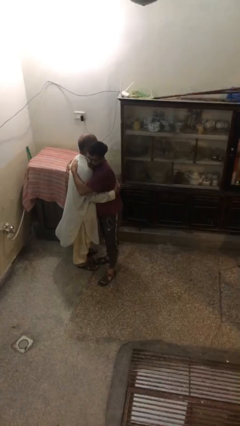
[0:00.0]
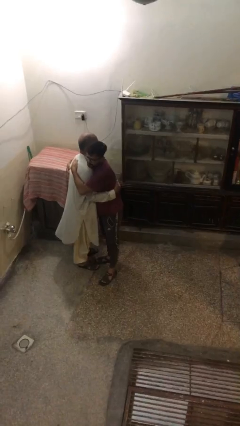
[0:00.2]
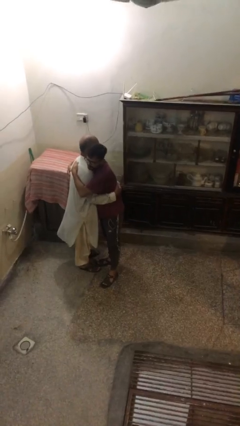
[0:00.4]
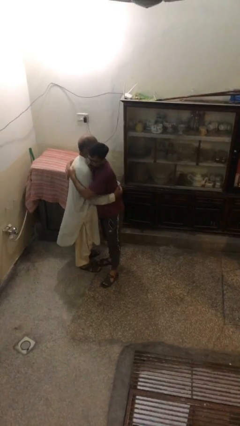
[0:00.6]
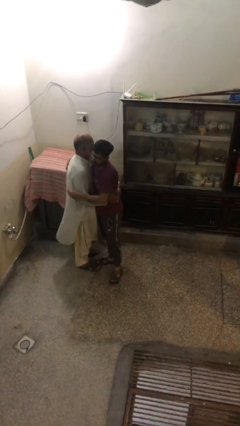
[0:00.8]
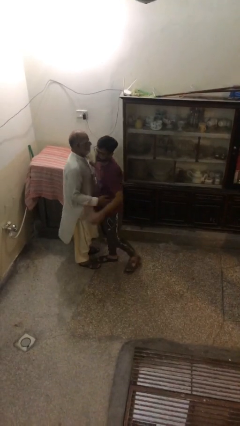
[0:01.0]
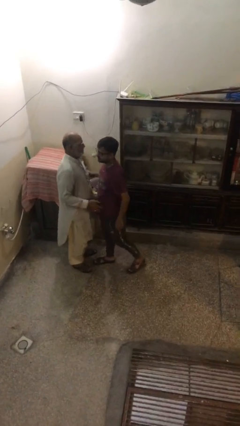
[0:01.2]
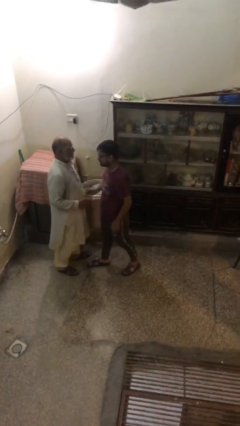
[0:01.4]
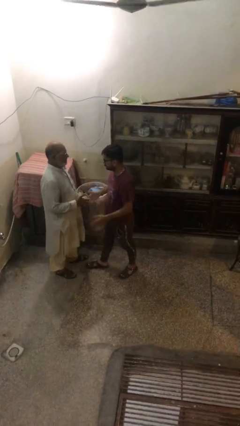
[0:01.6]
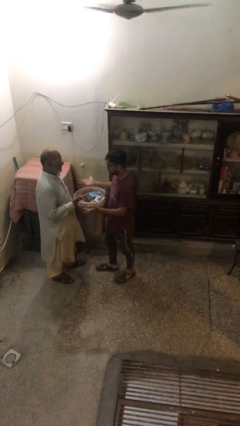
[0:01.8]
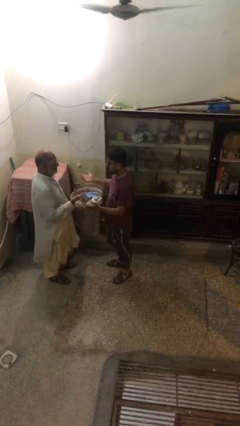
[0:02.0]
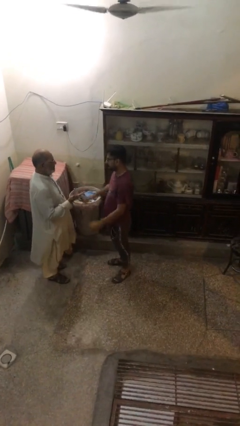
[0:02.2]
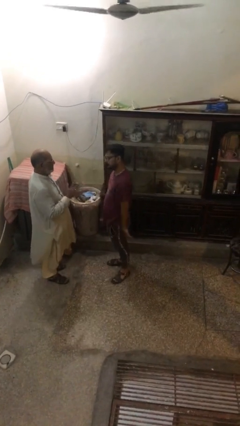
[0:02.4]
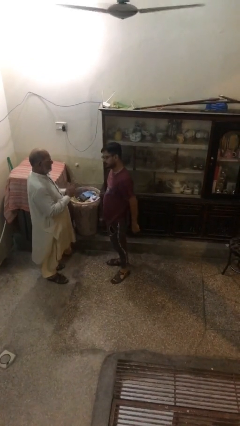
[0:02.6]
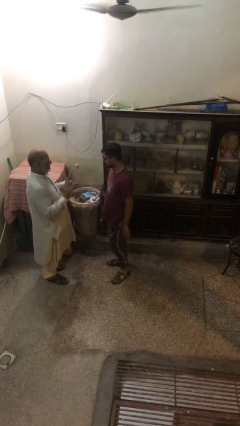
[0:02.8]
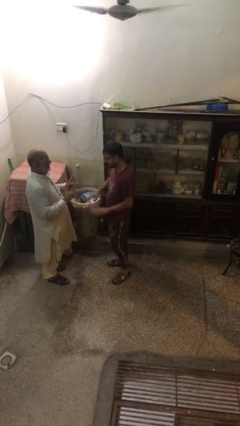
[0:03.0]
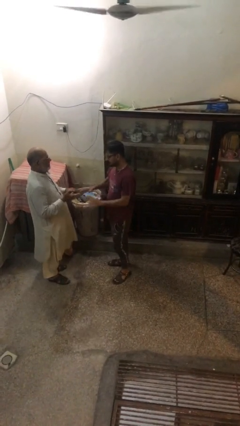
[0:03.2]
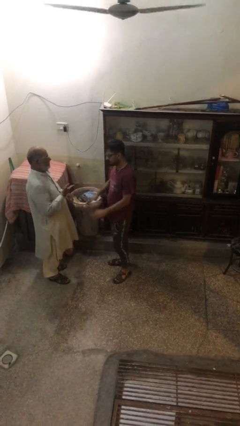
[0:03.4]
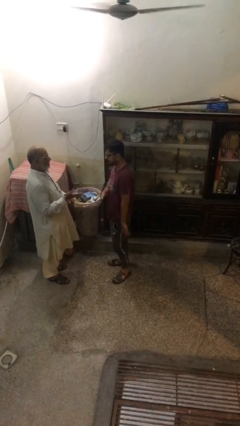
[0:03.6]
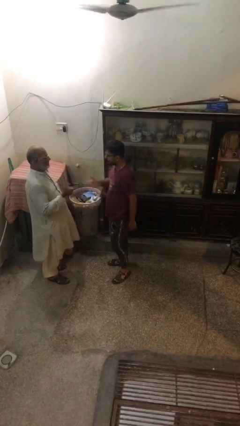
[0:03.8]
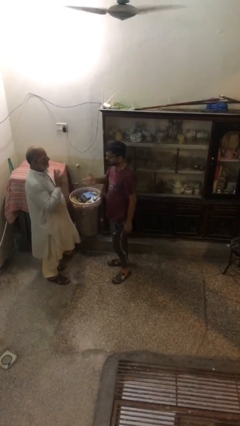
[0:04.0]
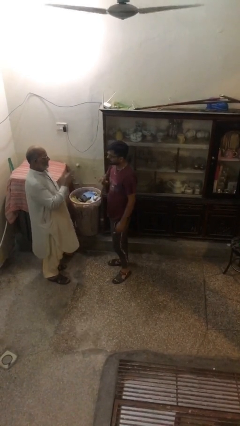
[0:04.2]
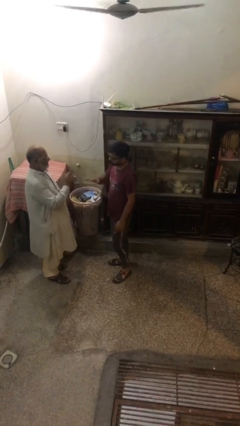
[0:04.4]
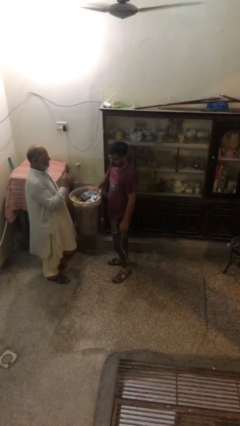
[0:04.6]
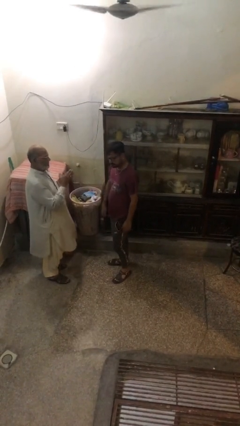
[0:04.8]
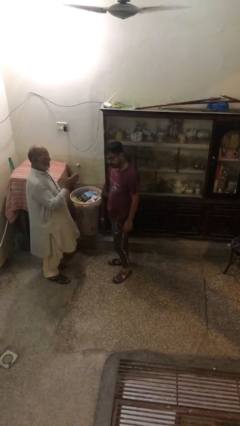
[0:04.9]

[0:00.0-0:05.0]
person talks to person

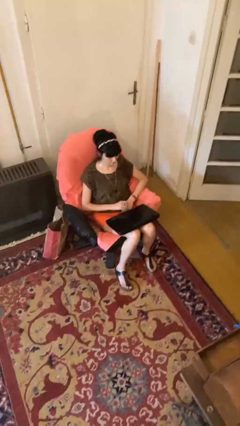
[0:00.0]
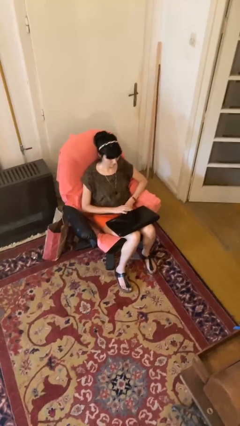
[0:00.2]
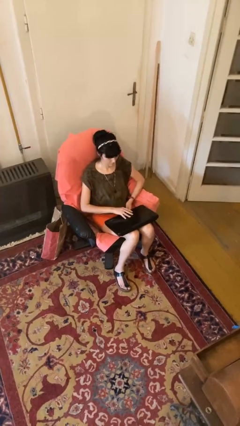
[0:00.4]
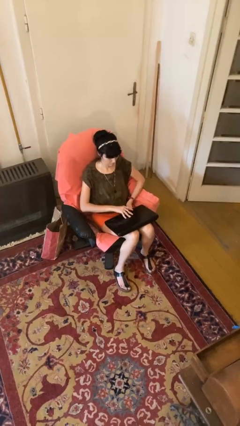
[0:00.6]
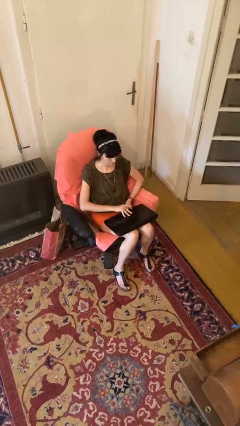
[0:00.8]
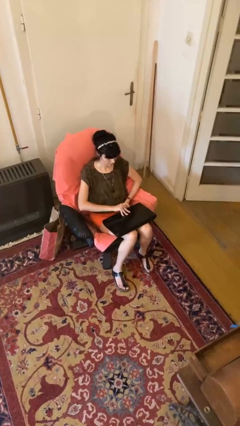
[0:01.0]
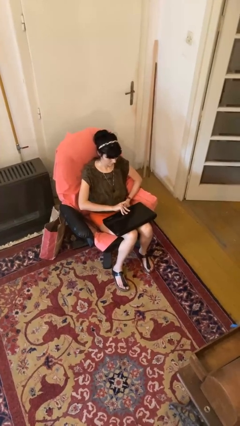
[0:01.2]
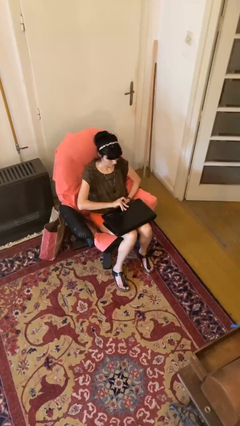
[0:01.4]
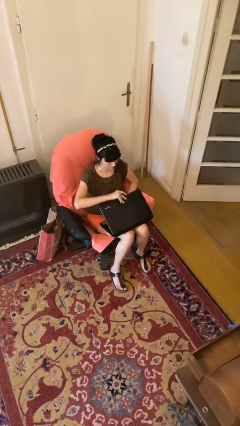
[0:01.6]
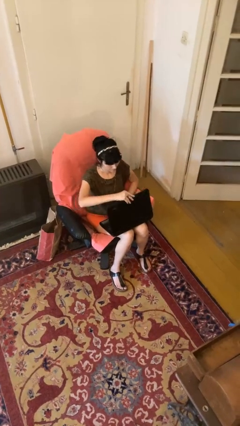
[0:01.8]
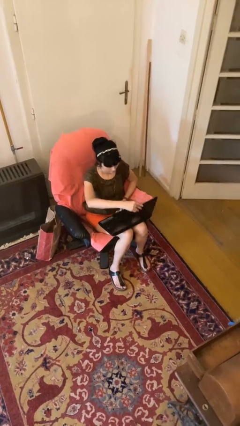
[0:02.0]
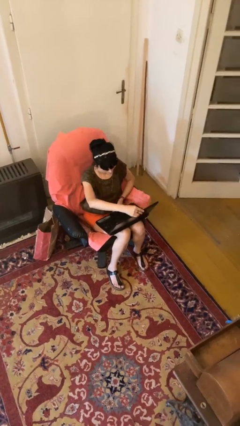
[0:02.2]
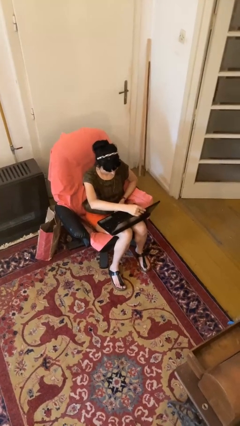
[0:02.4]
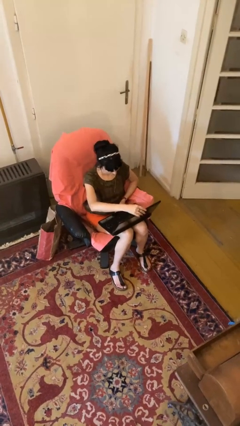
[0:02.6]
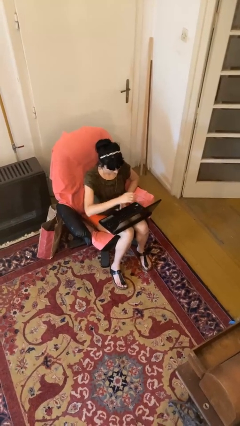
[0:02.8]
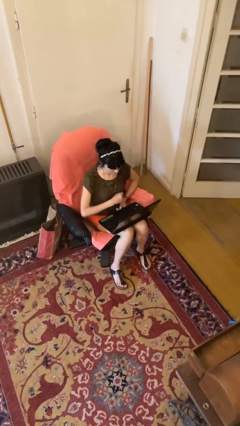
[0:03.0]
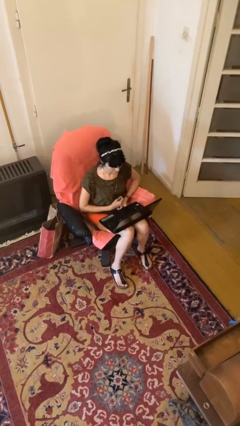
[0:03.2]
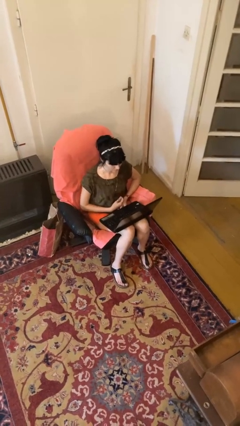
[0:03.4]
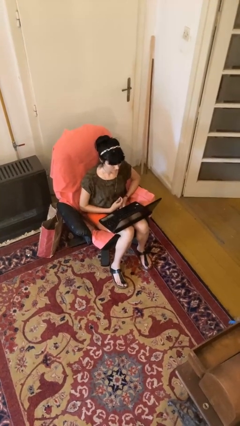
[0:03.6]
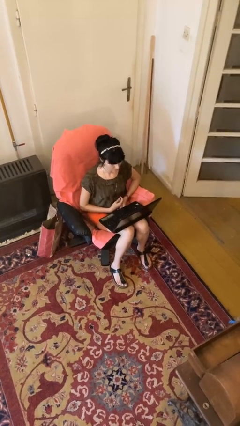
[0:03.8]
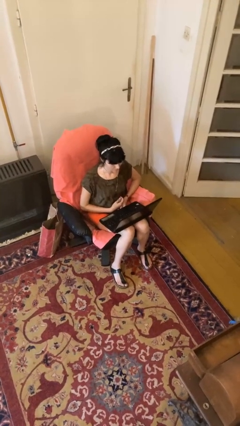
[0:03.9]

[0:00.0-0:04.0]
person opens laptop

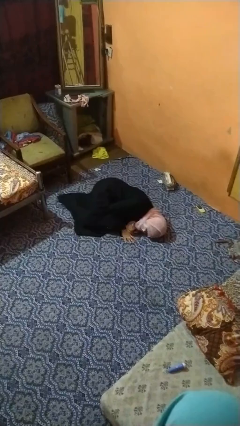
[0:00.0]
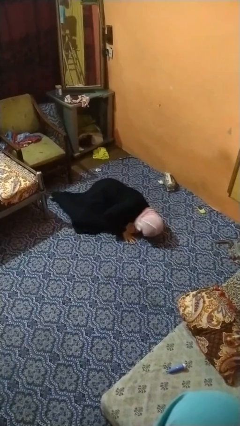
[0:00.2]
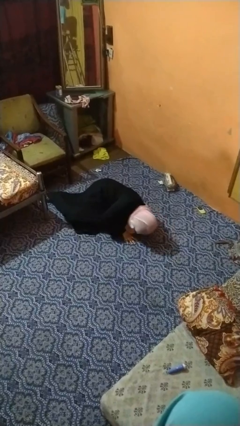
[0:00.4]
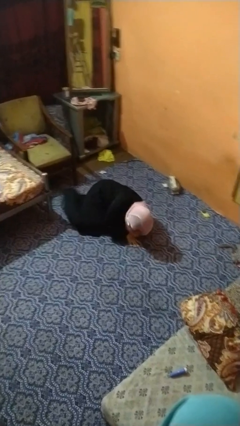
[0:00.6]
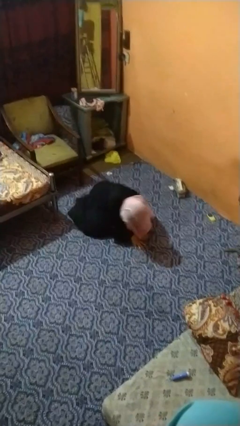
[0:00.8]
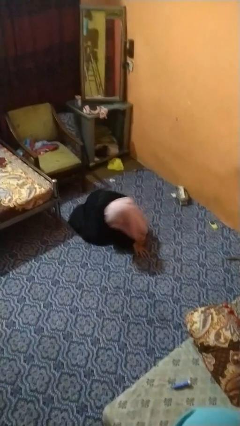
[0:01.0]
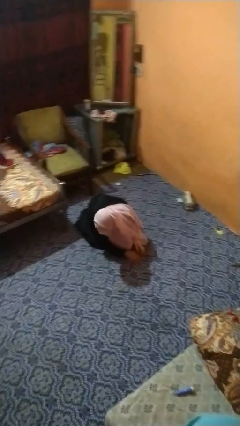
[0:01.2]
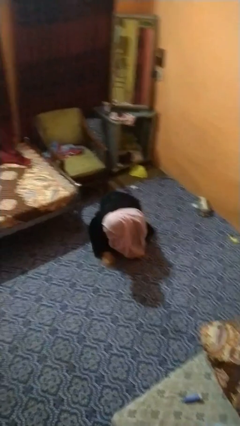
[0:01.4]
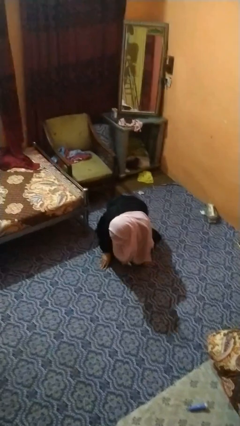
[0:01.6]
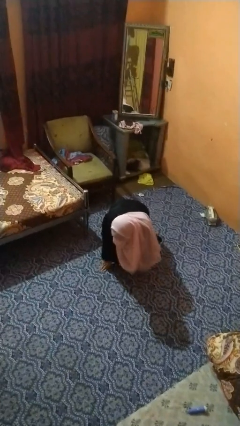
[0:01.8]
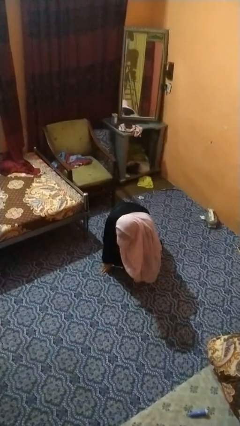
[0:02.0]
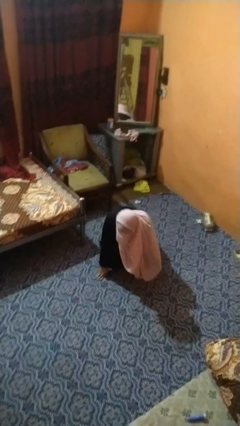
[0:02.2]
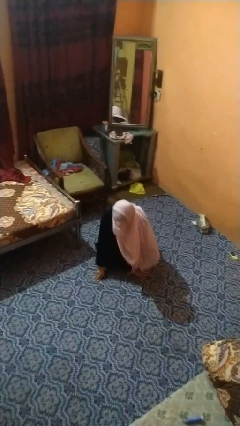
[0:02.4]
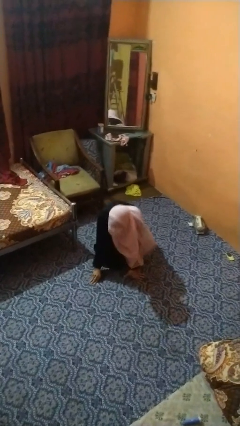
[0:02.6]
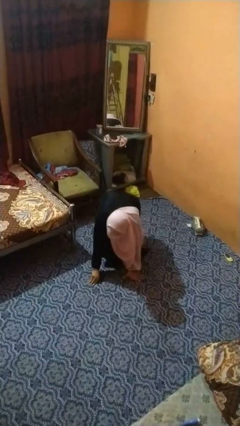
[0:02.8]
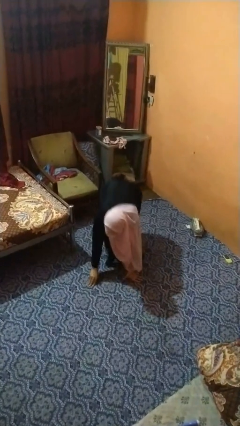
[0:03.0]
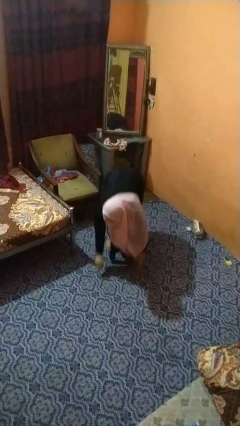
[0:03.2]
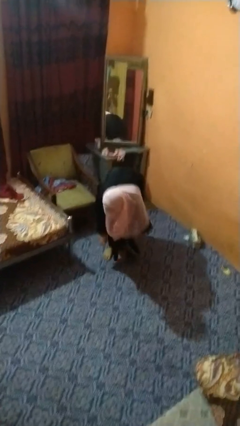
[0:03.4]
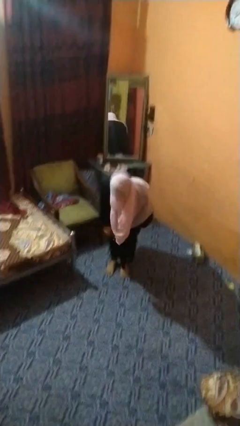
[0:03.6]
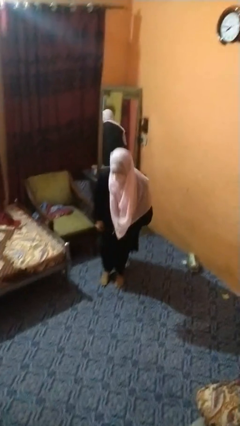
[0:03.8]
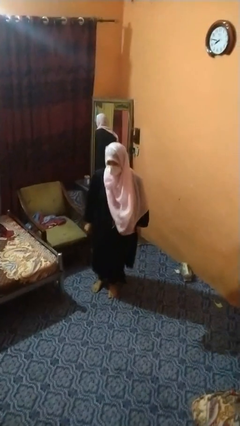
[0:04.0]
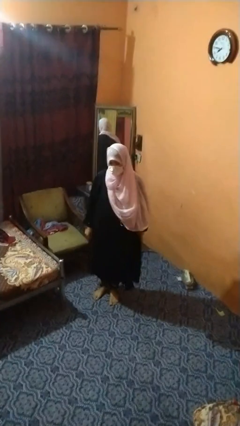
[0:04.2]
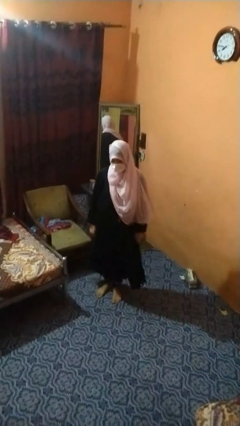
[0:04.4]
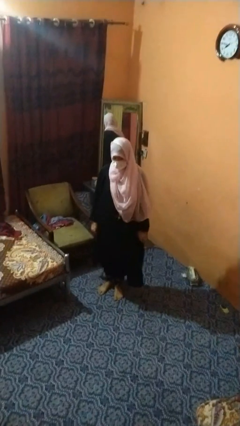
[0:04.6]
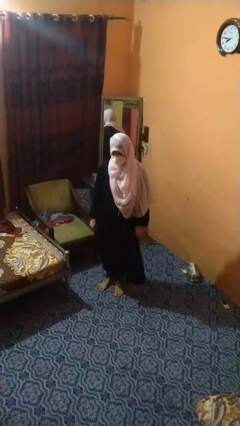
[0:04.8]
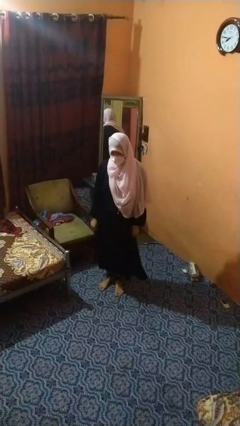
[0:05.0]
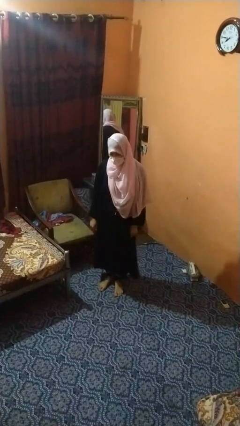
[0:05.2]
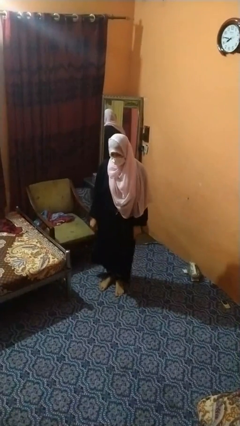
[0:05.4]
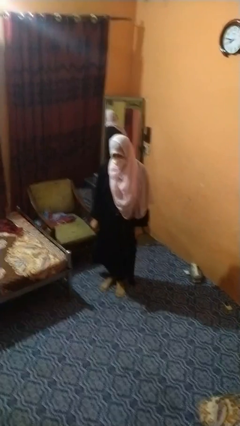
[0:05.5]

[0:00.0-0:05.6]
person stands up from floor

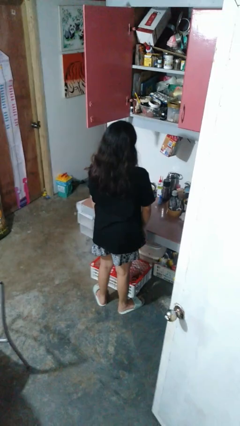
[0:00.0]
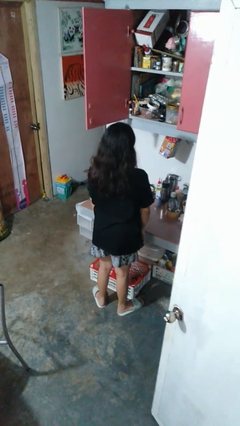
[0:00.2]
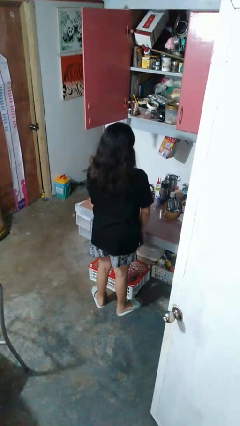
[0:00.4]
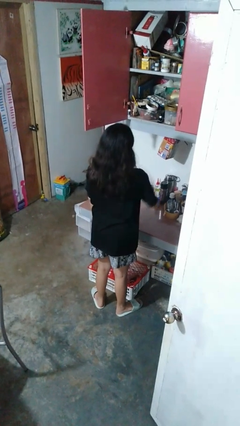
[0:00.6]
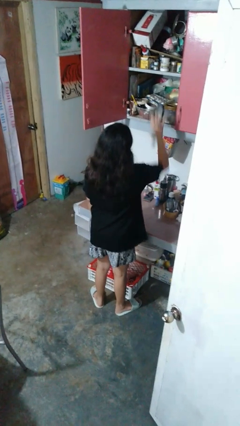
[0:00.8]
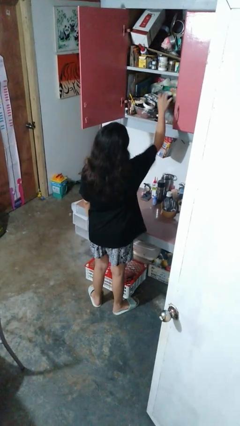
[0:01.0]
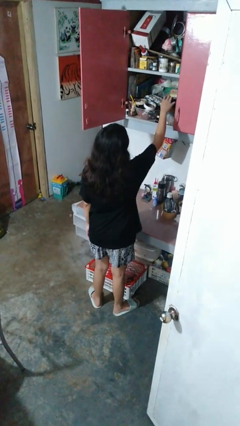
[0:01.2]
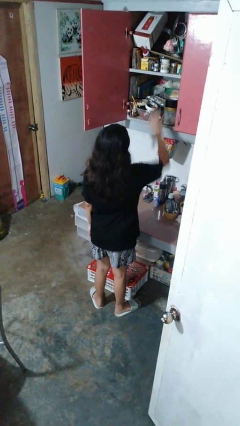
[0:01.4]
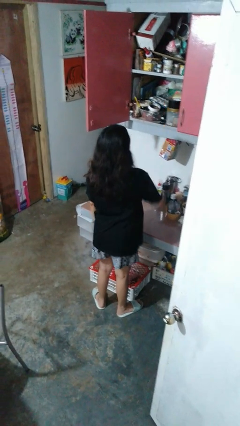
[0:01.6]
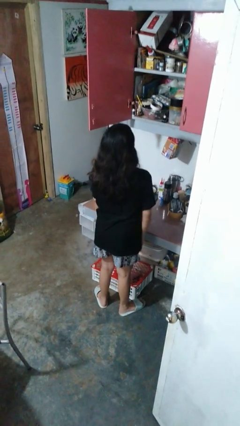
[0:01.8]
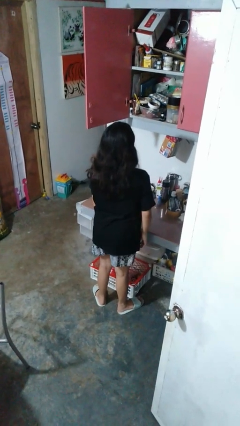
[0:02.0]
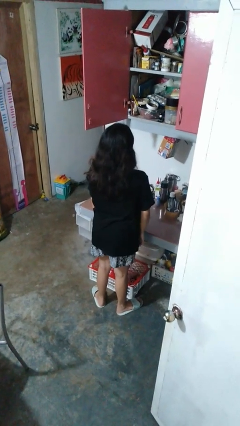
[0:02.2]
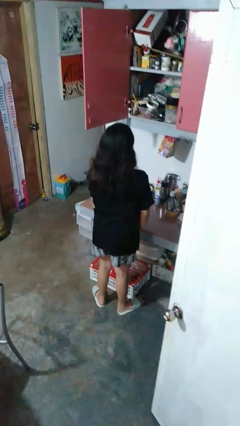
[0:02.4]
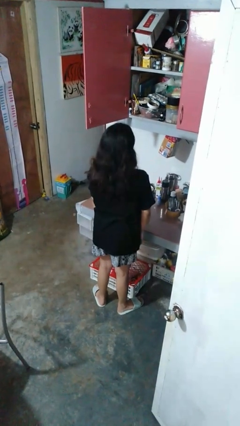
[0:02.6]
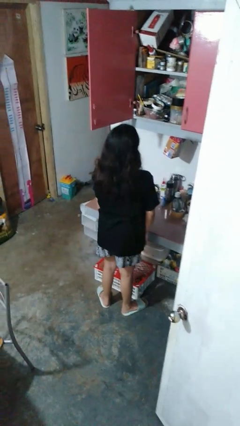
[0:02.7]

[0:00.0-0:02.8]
person puts object in cabinet

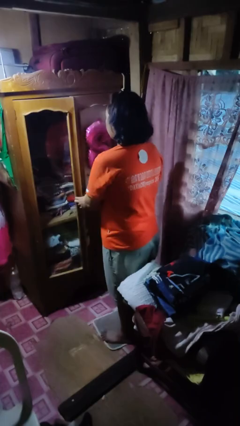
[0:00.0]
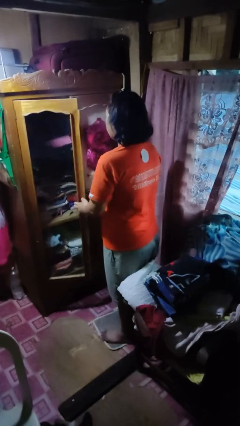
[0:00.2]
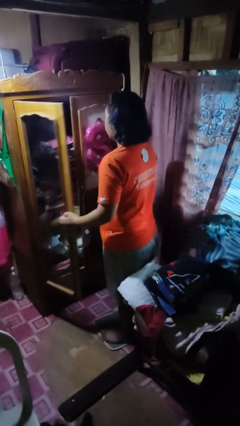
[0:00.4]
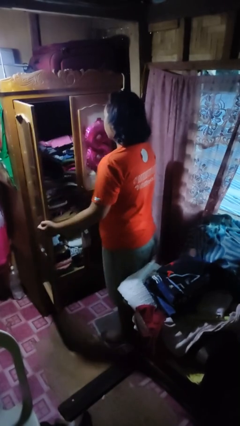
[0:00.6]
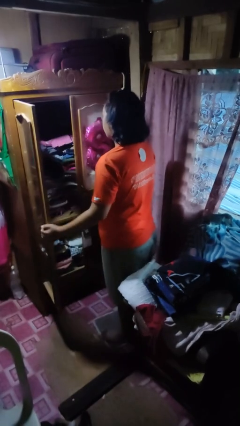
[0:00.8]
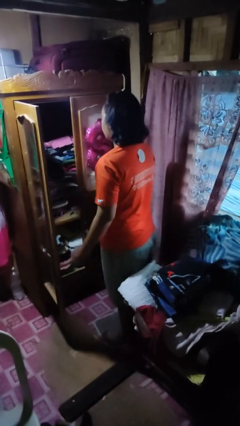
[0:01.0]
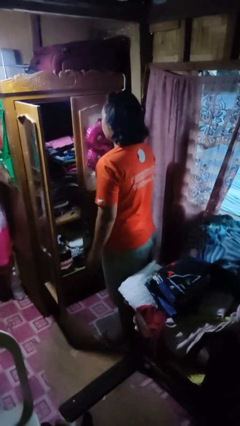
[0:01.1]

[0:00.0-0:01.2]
person opens closet door
